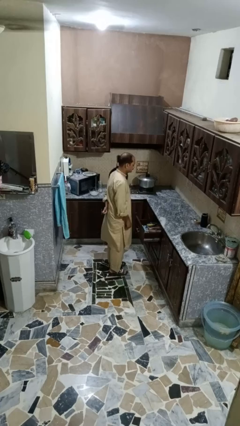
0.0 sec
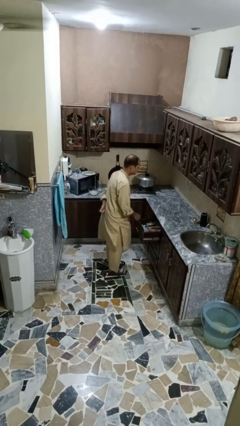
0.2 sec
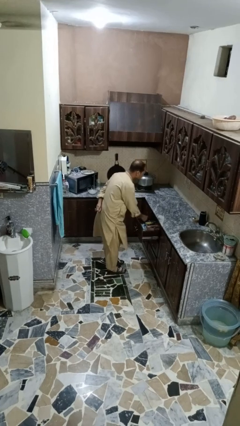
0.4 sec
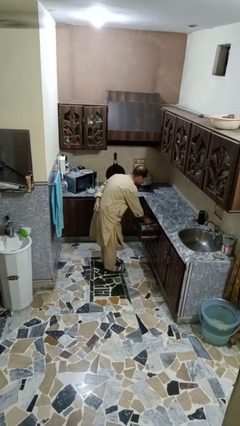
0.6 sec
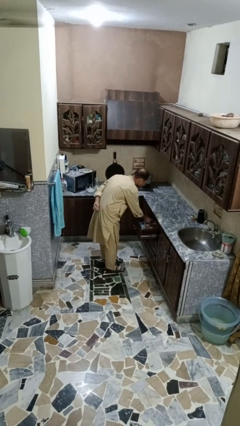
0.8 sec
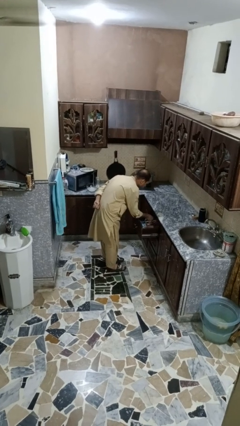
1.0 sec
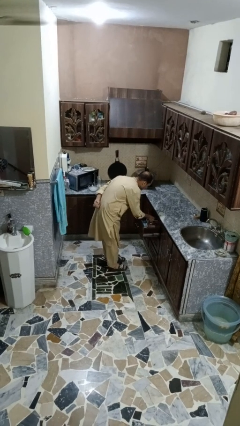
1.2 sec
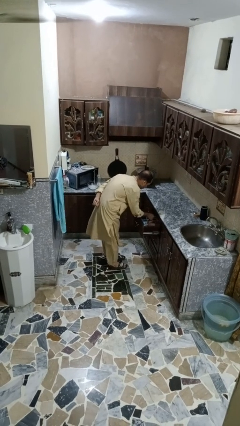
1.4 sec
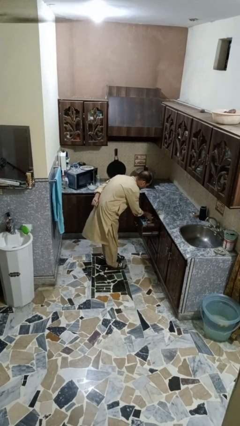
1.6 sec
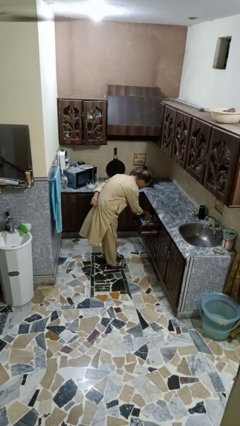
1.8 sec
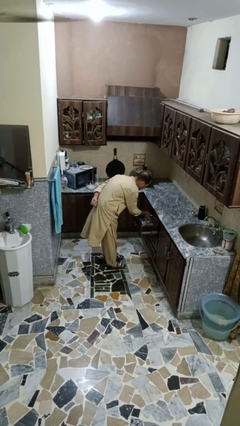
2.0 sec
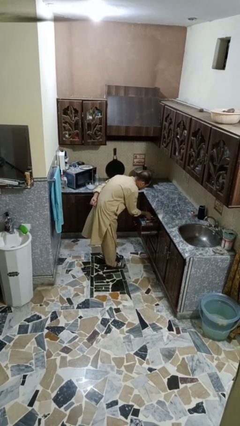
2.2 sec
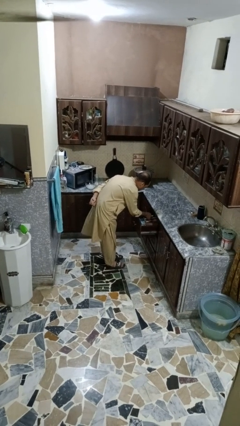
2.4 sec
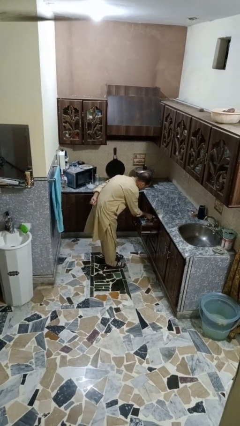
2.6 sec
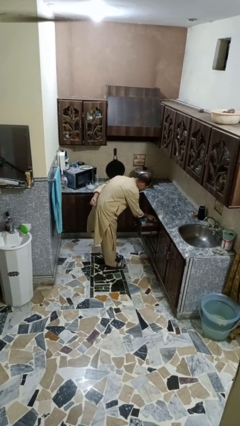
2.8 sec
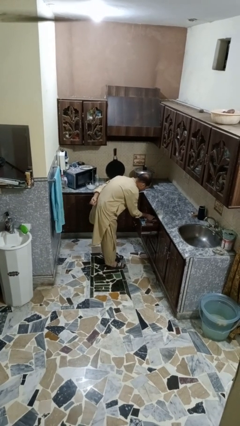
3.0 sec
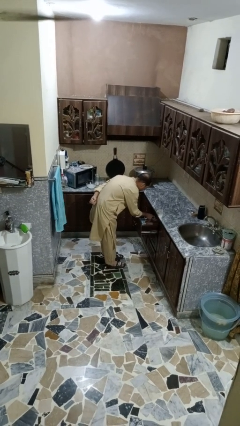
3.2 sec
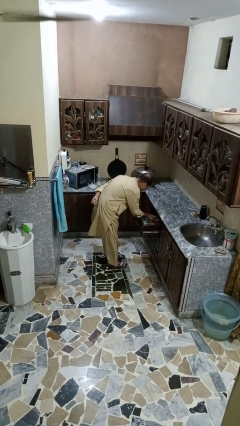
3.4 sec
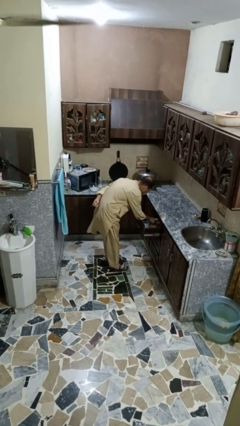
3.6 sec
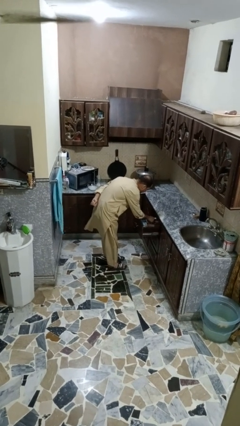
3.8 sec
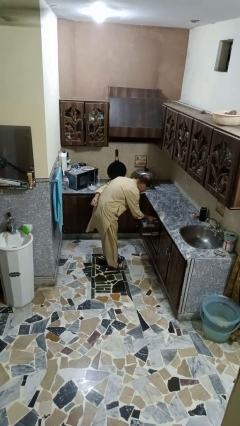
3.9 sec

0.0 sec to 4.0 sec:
person searches in kitchen drawer

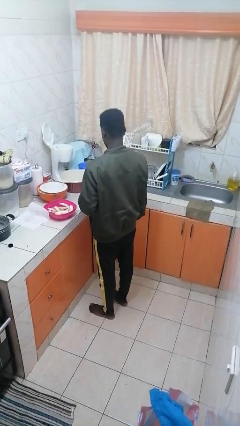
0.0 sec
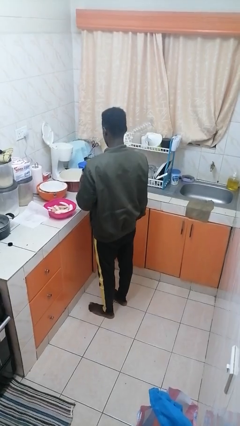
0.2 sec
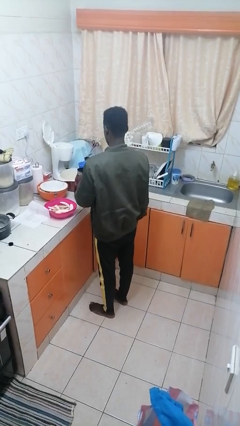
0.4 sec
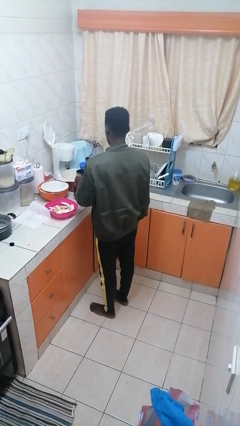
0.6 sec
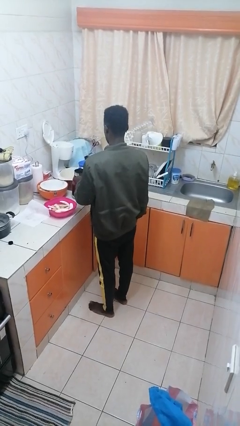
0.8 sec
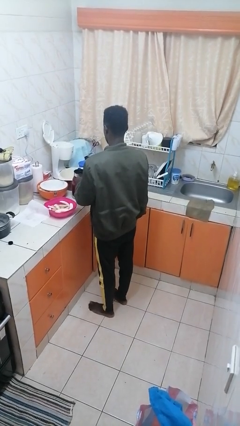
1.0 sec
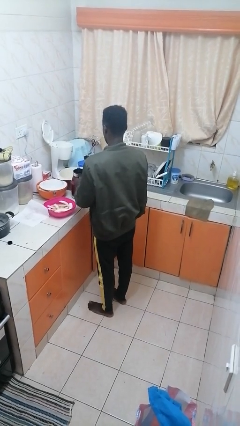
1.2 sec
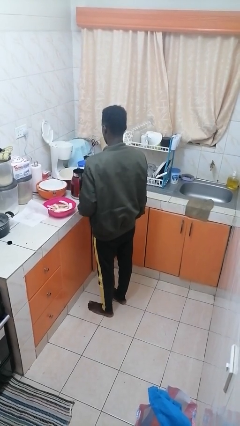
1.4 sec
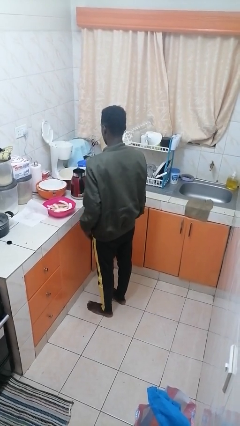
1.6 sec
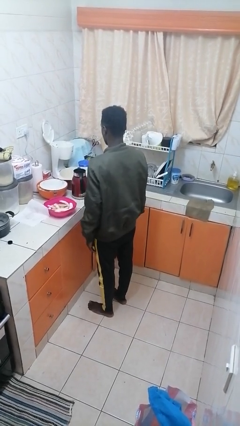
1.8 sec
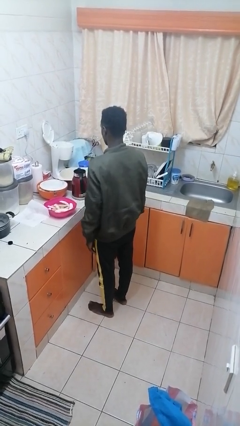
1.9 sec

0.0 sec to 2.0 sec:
person puts down object on countertop

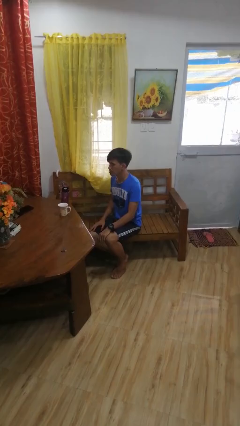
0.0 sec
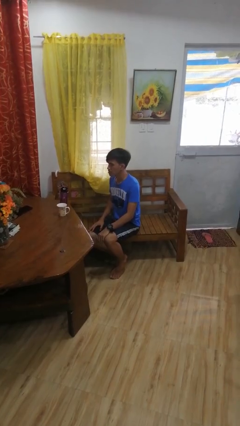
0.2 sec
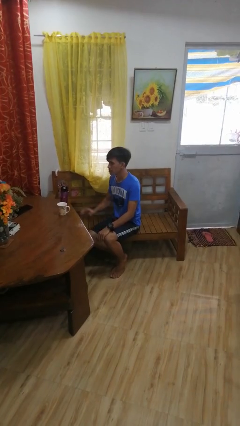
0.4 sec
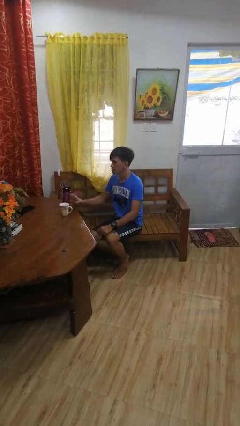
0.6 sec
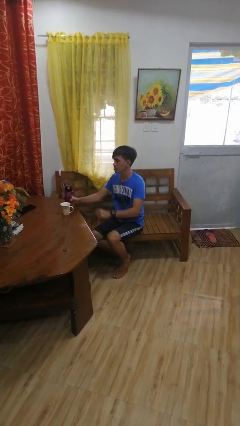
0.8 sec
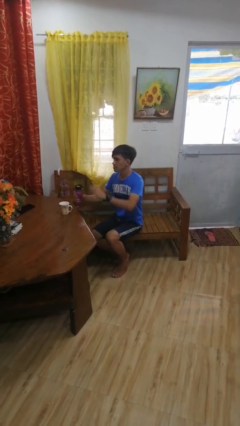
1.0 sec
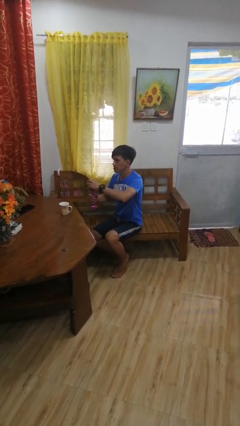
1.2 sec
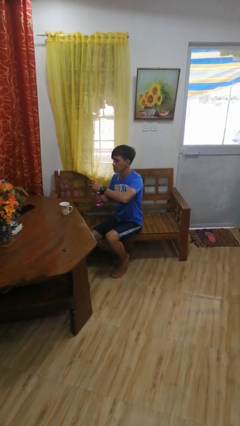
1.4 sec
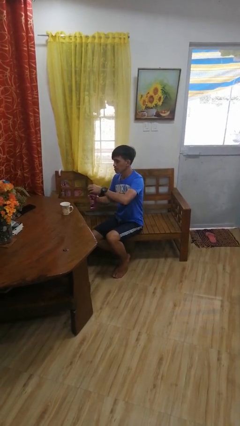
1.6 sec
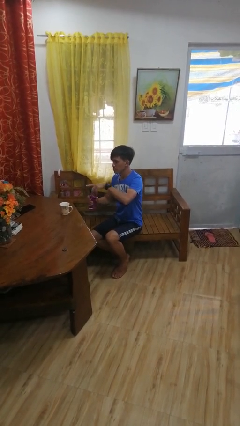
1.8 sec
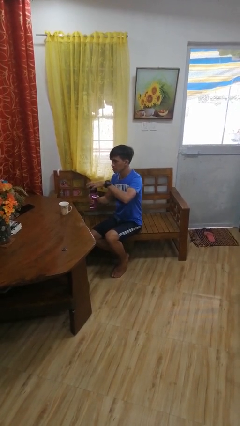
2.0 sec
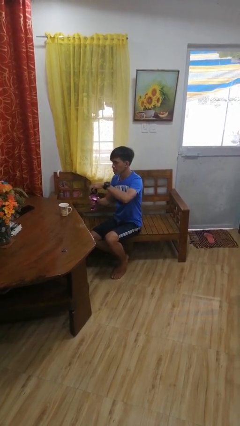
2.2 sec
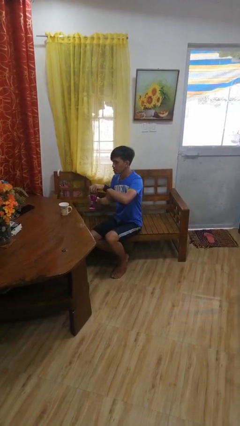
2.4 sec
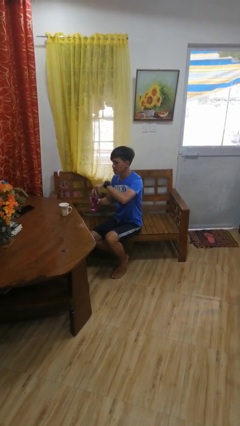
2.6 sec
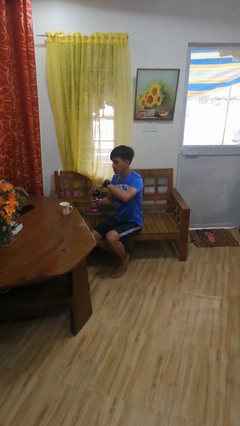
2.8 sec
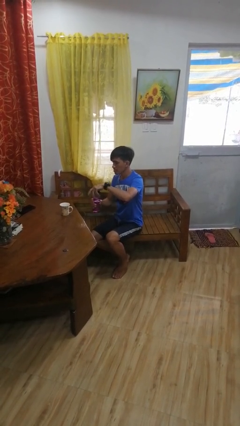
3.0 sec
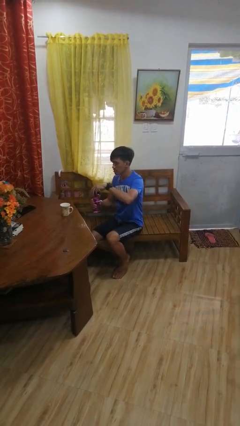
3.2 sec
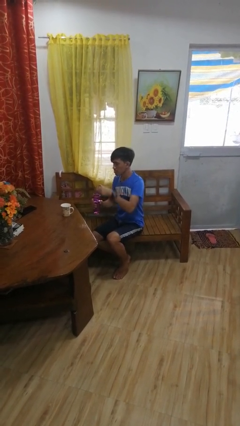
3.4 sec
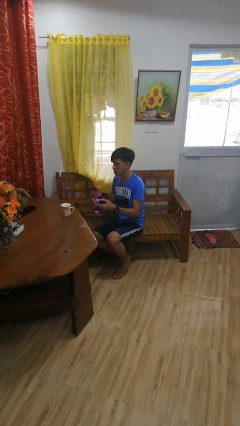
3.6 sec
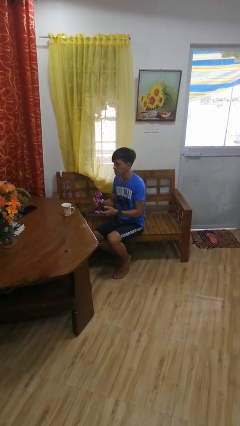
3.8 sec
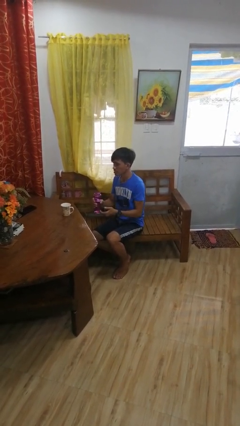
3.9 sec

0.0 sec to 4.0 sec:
person unscrews lid from bottle

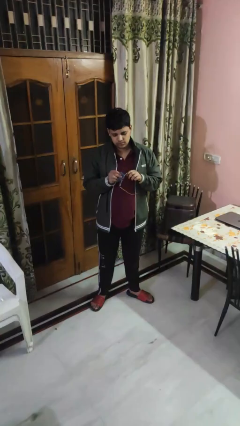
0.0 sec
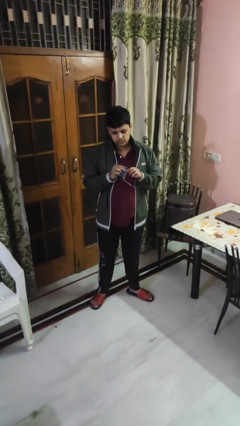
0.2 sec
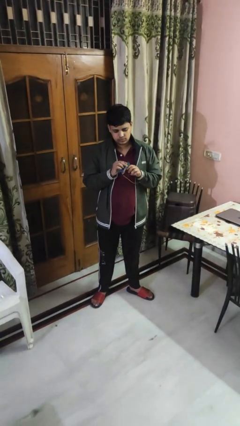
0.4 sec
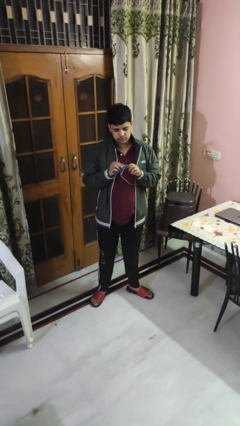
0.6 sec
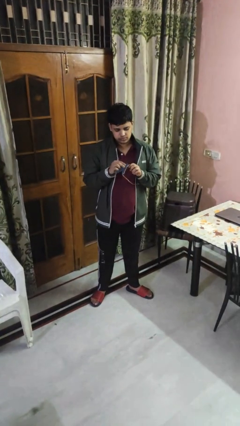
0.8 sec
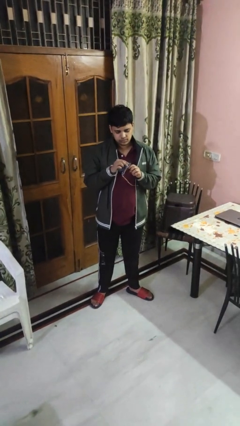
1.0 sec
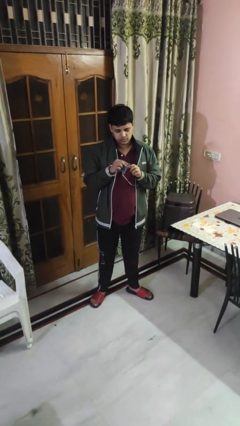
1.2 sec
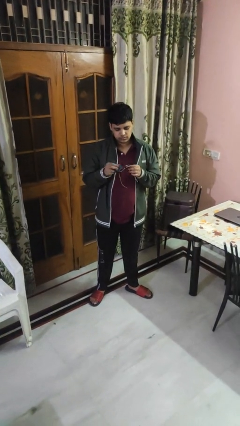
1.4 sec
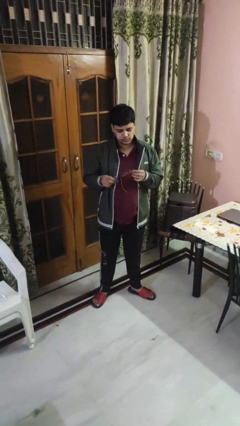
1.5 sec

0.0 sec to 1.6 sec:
person cleans eyeglasses

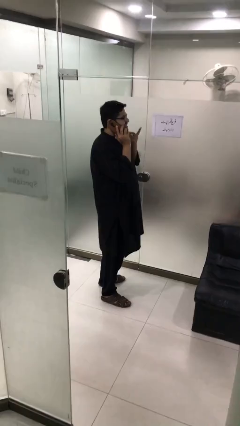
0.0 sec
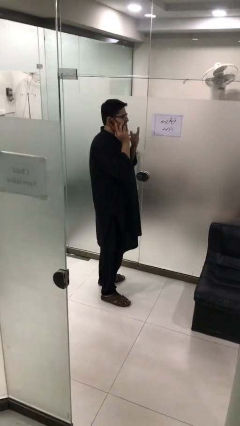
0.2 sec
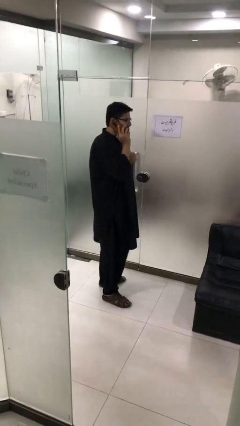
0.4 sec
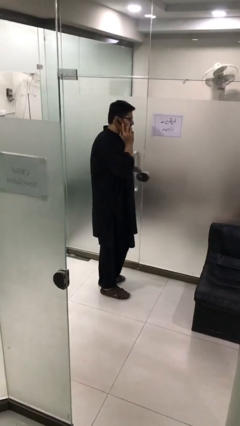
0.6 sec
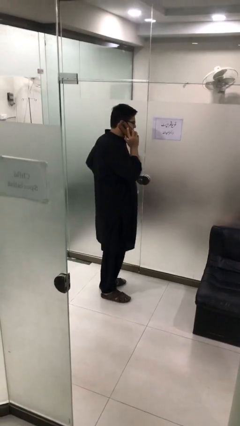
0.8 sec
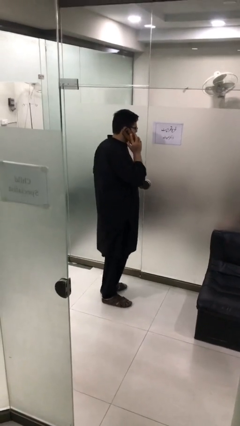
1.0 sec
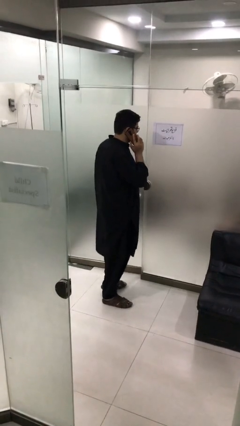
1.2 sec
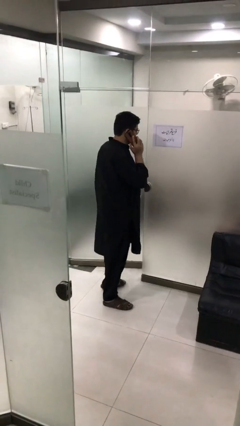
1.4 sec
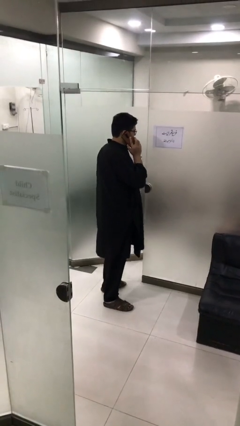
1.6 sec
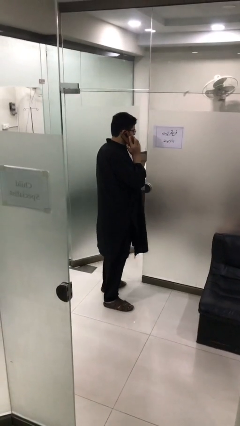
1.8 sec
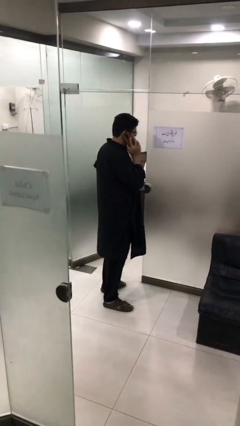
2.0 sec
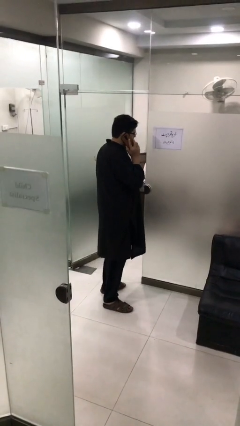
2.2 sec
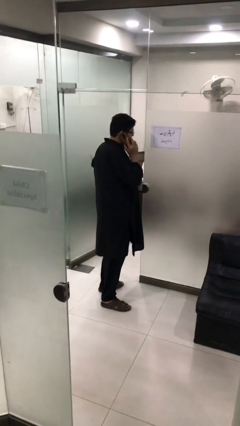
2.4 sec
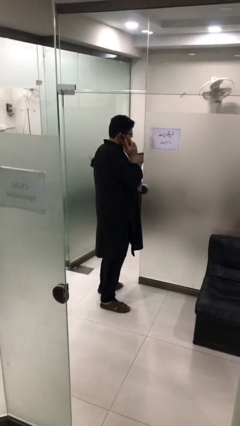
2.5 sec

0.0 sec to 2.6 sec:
person opens facility door

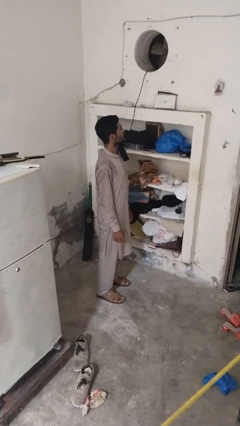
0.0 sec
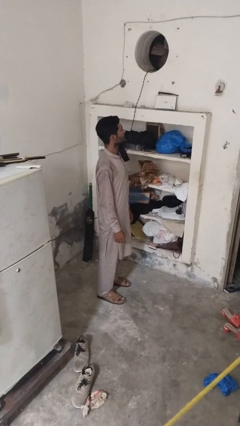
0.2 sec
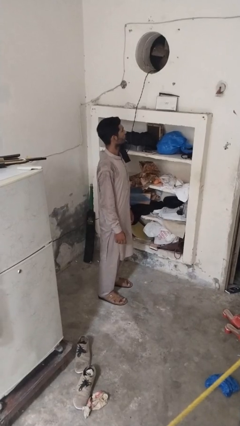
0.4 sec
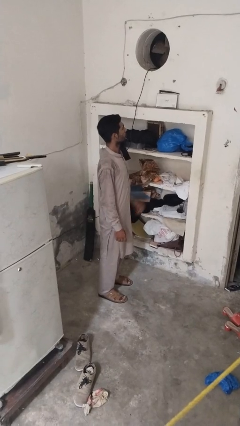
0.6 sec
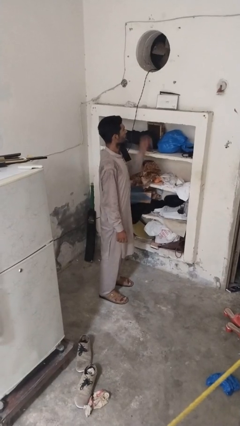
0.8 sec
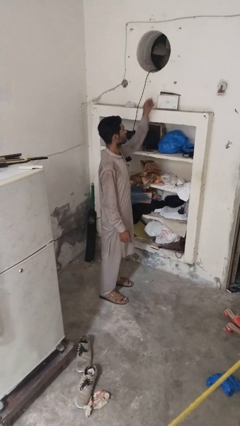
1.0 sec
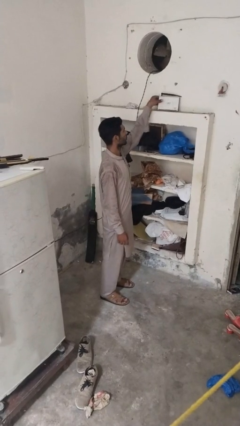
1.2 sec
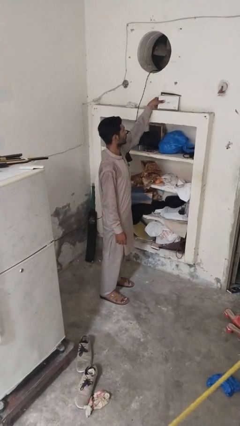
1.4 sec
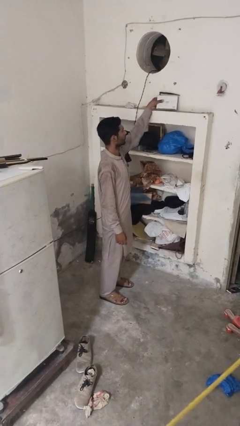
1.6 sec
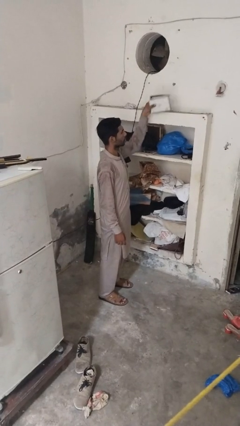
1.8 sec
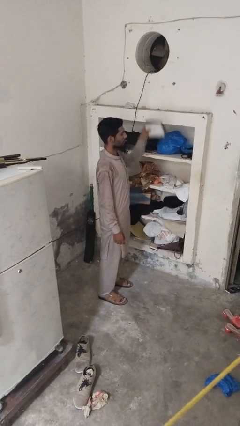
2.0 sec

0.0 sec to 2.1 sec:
person picks up object from shelf

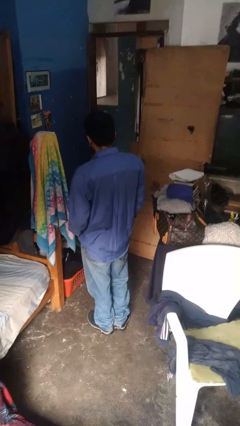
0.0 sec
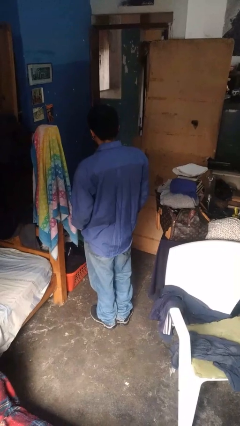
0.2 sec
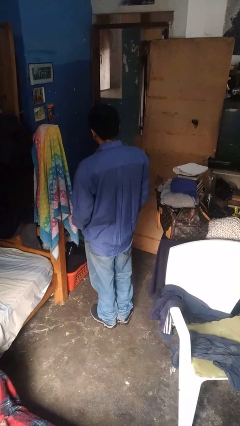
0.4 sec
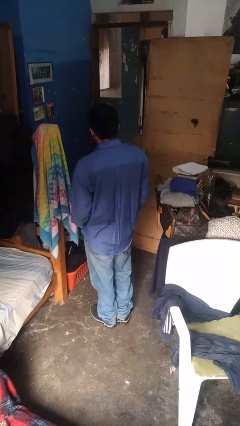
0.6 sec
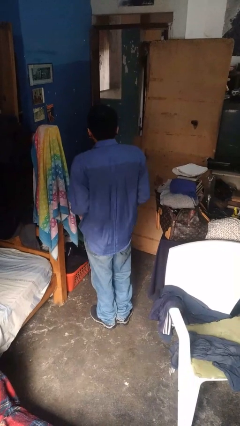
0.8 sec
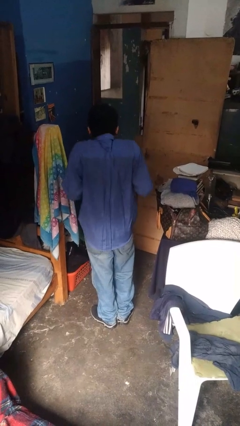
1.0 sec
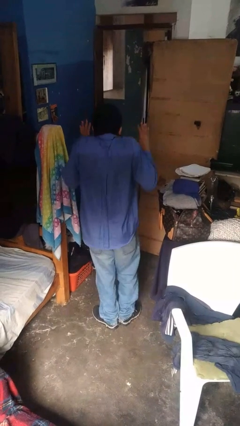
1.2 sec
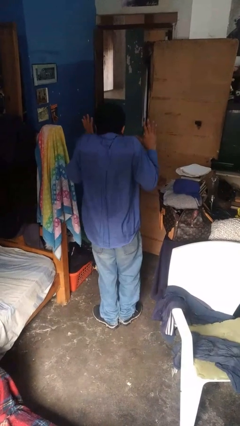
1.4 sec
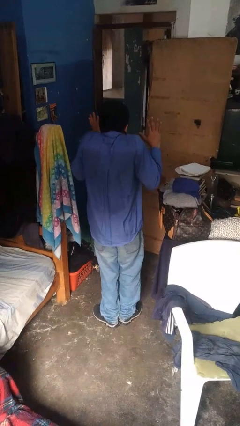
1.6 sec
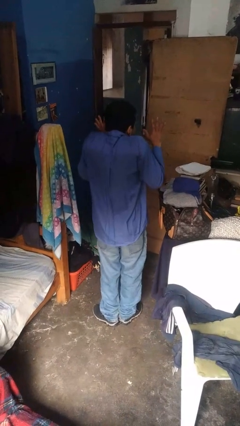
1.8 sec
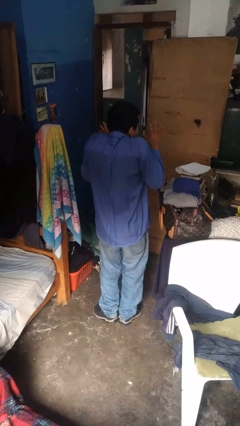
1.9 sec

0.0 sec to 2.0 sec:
person shrugs
